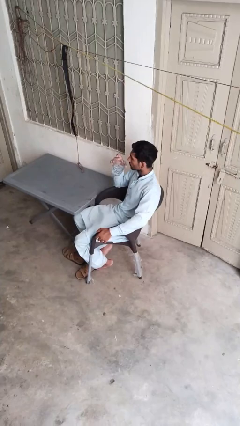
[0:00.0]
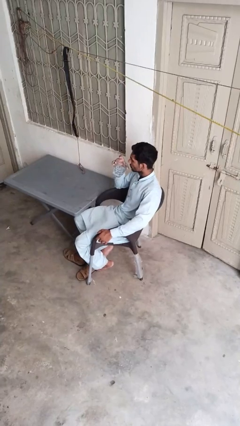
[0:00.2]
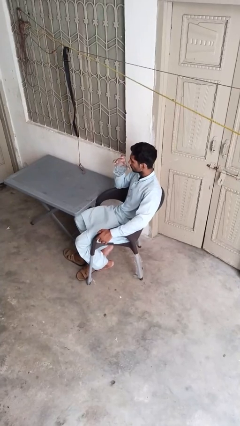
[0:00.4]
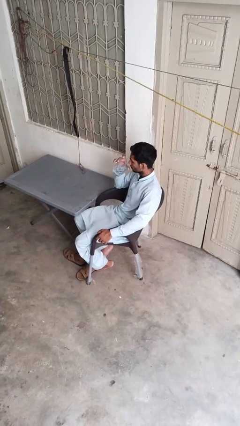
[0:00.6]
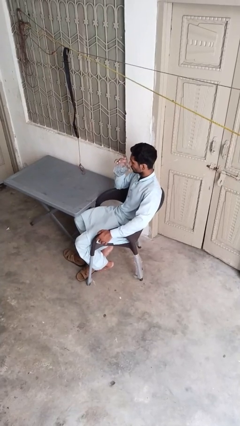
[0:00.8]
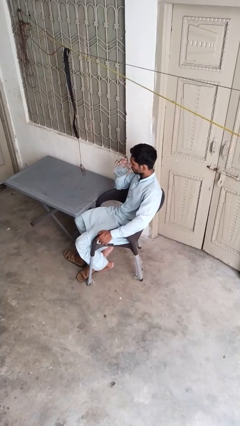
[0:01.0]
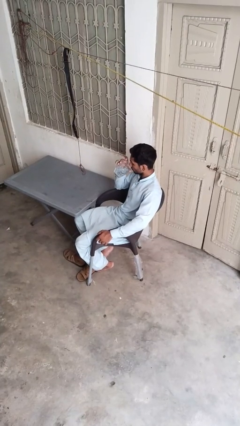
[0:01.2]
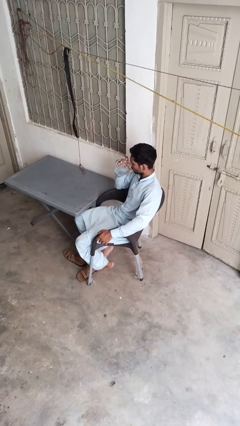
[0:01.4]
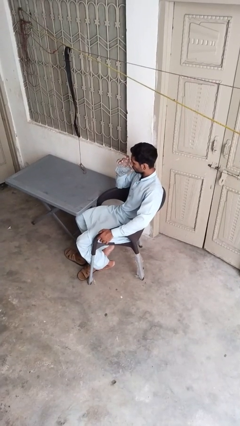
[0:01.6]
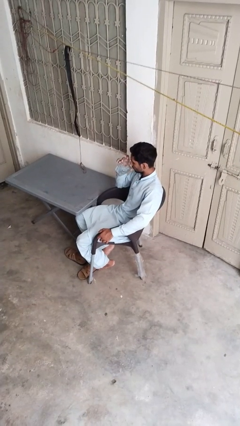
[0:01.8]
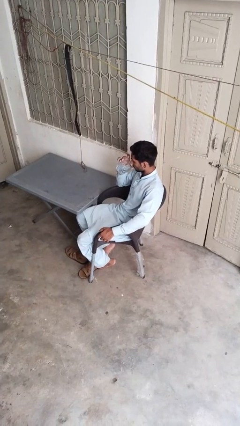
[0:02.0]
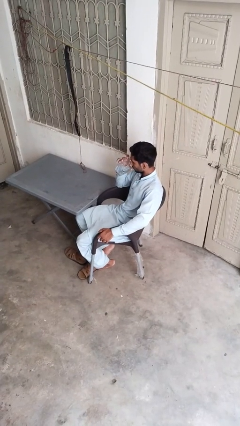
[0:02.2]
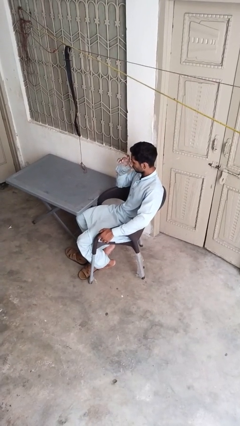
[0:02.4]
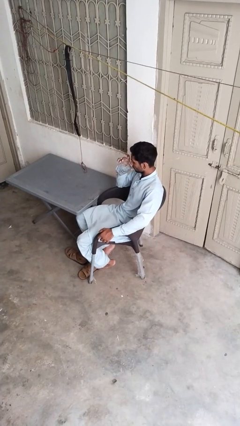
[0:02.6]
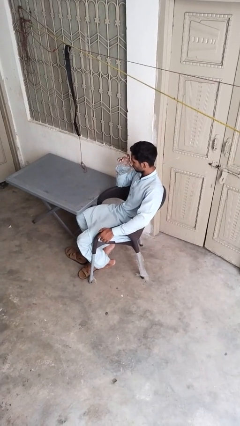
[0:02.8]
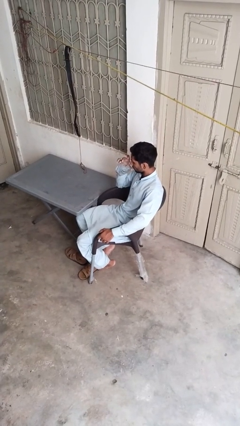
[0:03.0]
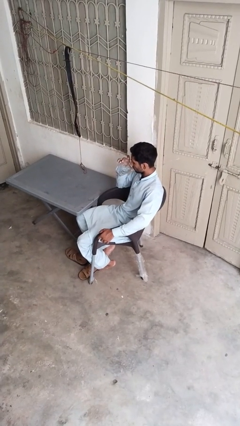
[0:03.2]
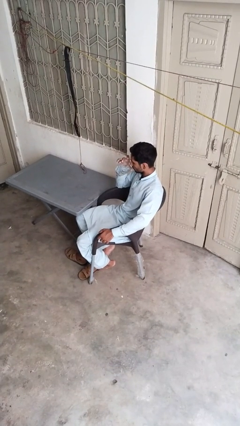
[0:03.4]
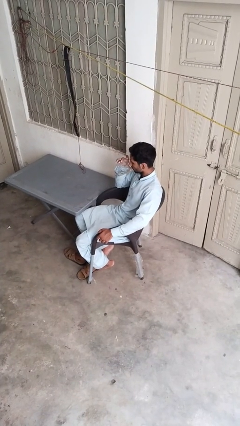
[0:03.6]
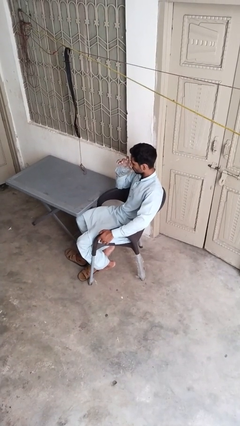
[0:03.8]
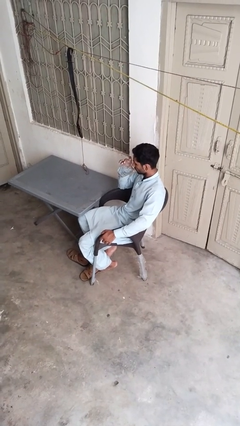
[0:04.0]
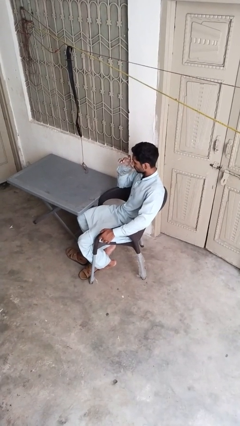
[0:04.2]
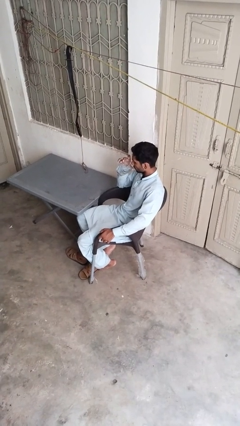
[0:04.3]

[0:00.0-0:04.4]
person drinks from mug

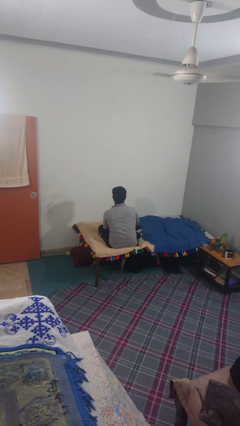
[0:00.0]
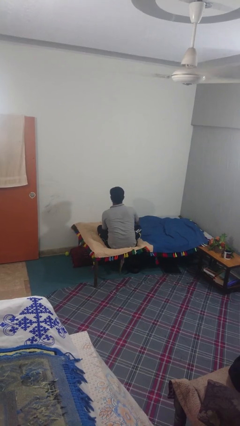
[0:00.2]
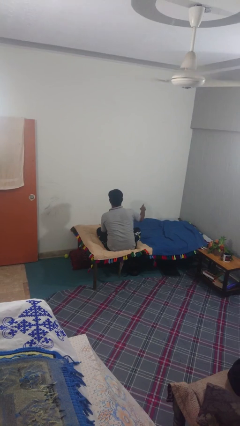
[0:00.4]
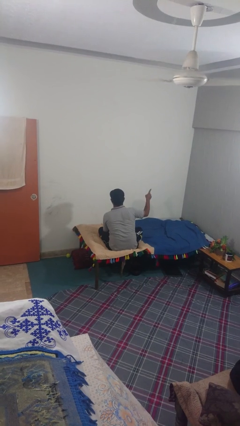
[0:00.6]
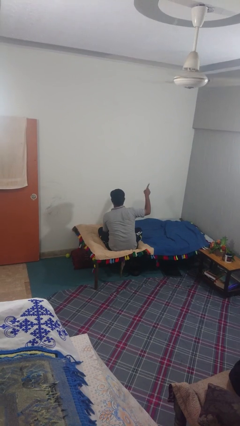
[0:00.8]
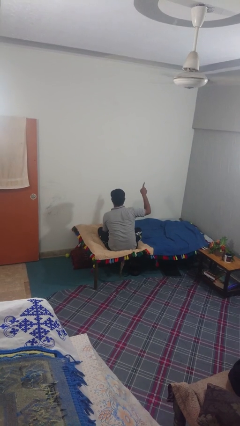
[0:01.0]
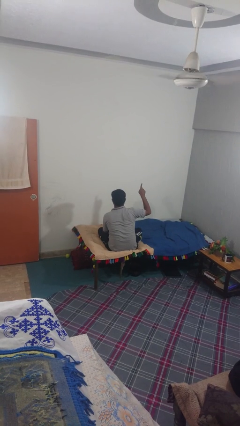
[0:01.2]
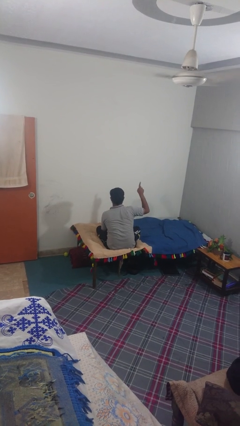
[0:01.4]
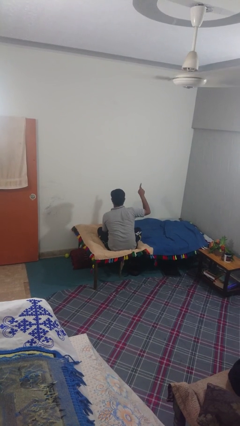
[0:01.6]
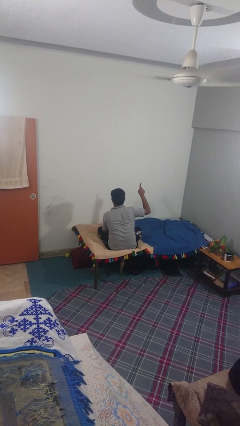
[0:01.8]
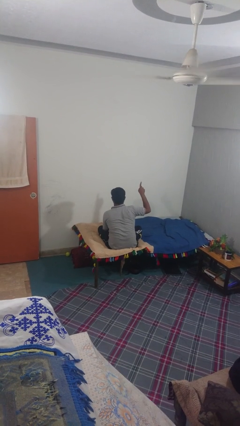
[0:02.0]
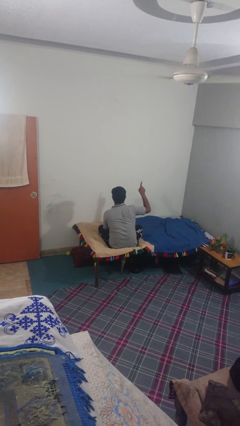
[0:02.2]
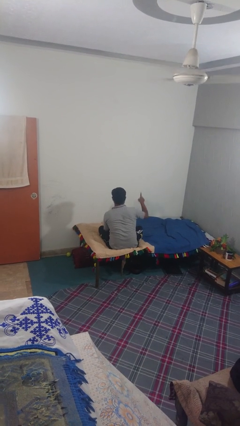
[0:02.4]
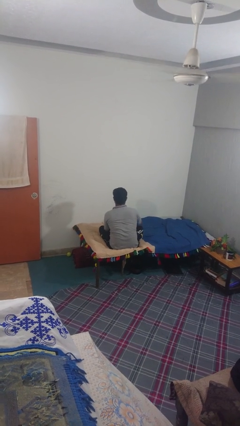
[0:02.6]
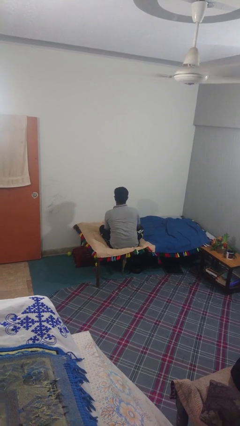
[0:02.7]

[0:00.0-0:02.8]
person gestures number one

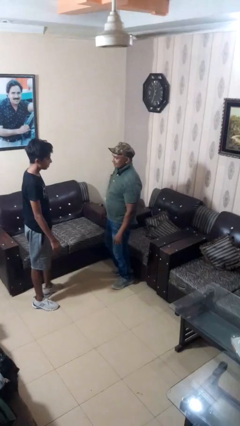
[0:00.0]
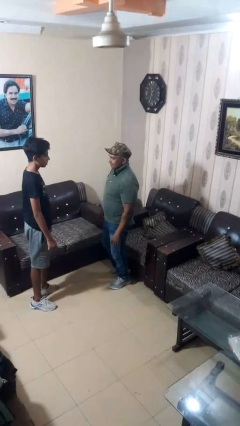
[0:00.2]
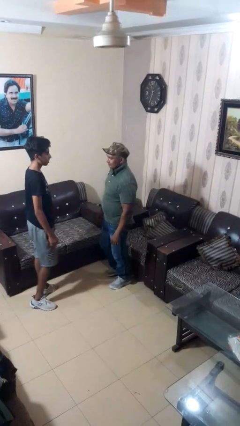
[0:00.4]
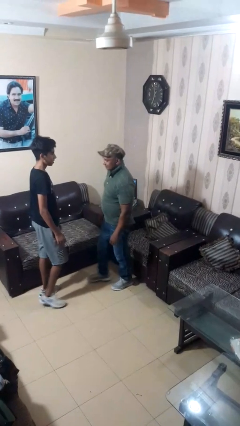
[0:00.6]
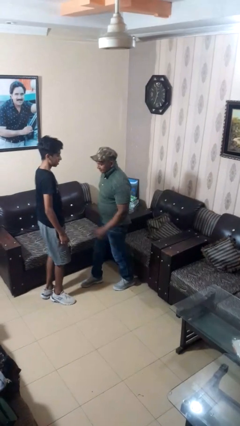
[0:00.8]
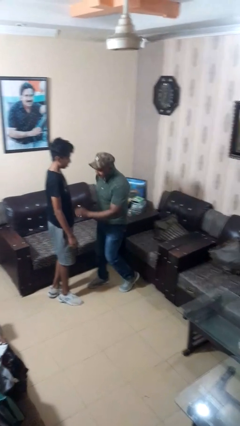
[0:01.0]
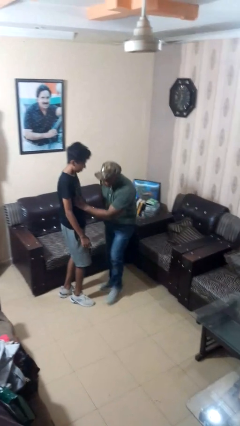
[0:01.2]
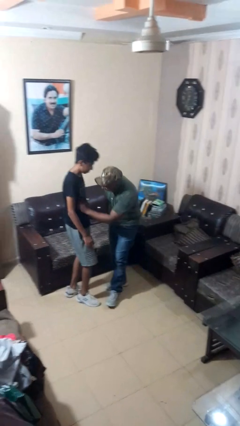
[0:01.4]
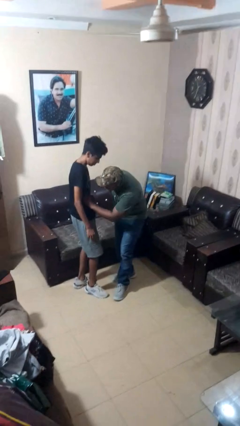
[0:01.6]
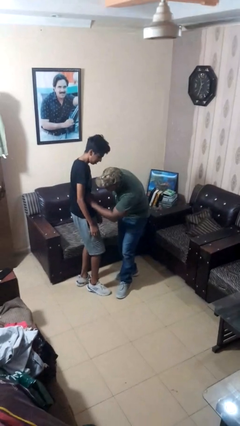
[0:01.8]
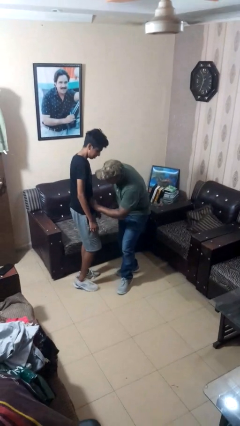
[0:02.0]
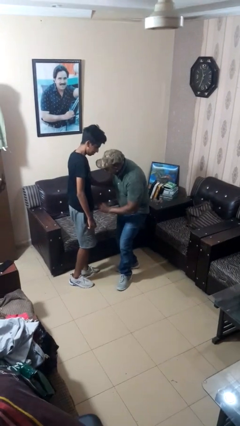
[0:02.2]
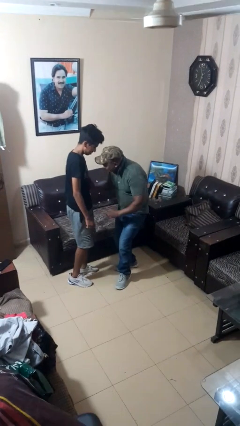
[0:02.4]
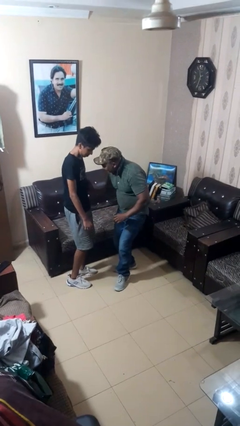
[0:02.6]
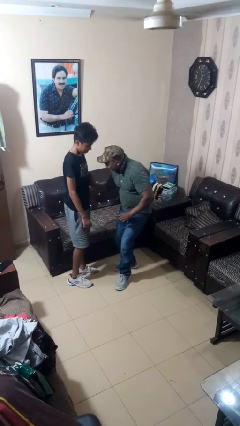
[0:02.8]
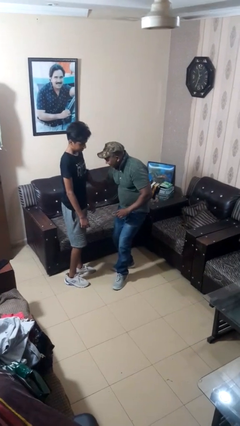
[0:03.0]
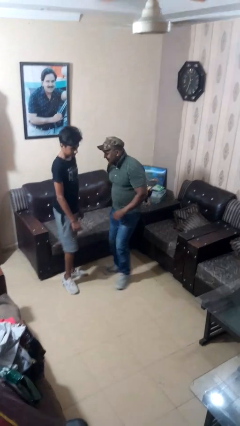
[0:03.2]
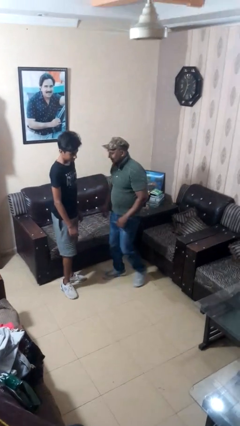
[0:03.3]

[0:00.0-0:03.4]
person tickles person

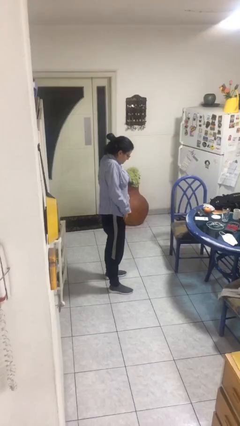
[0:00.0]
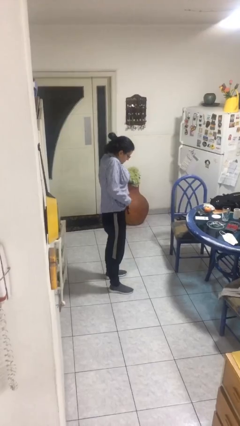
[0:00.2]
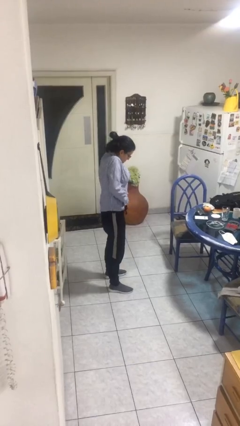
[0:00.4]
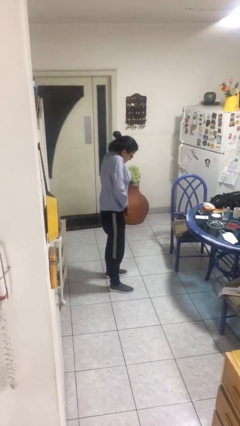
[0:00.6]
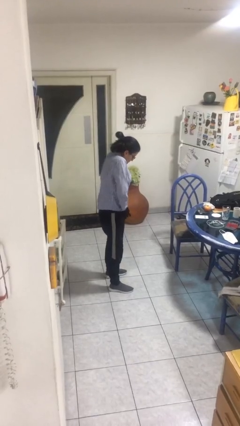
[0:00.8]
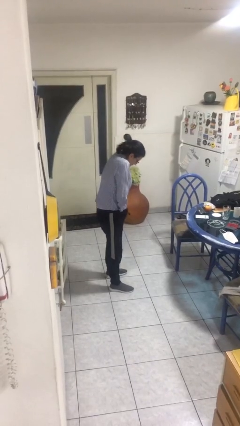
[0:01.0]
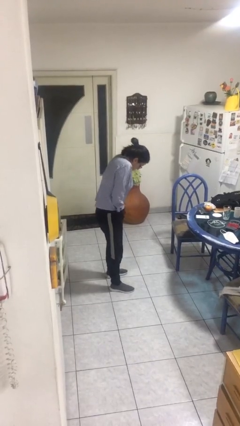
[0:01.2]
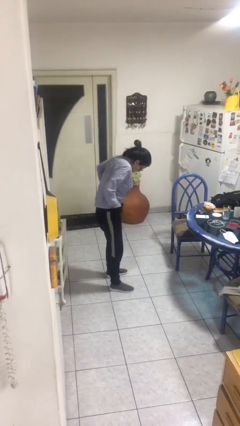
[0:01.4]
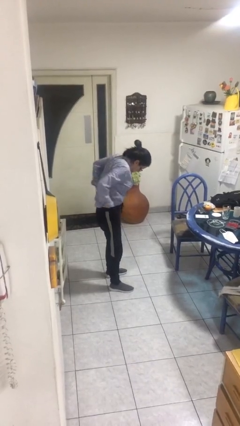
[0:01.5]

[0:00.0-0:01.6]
person tucks in shirt

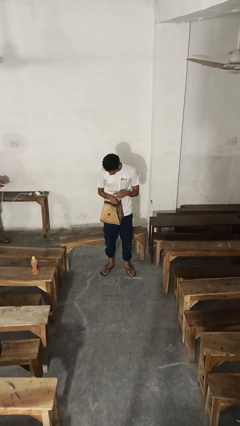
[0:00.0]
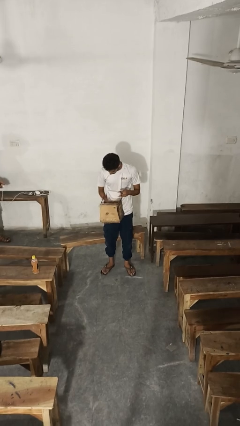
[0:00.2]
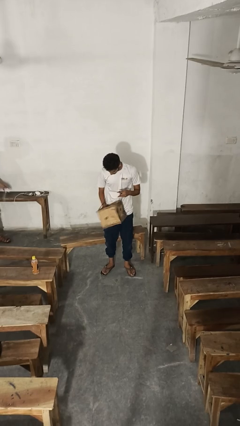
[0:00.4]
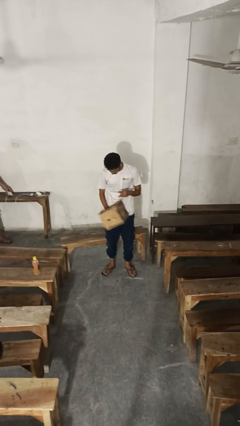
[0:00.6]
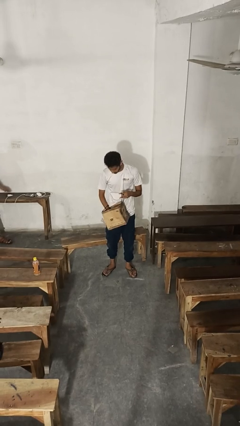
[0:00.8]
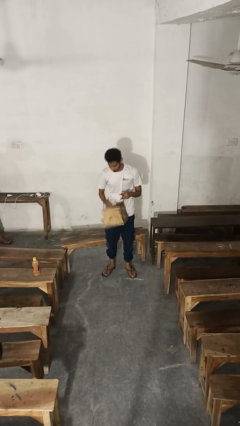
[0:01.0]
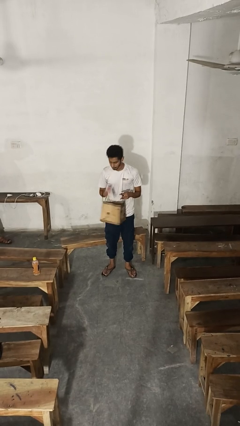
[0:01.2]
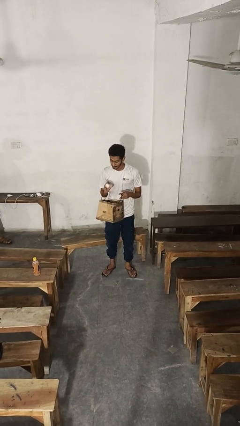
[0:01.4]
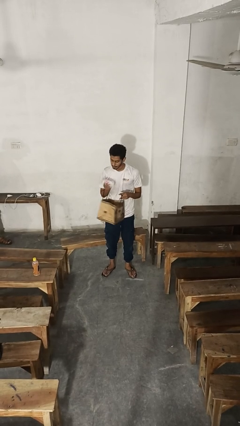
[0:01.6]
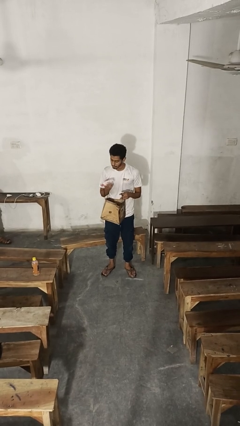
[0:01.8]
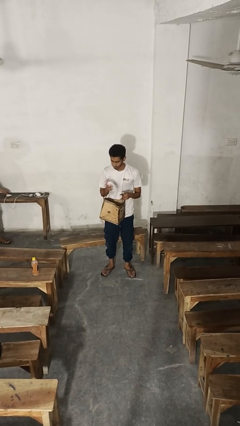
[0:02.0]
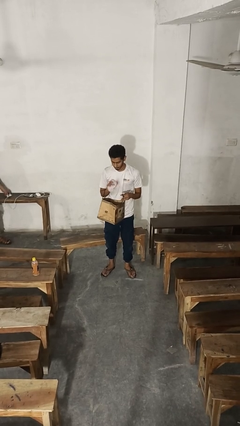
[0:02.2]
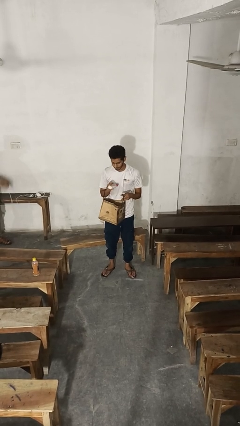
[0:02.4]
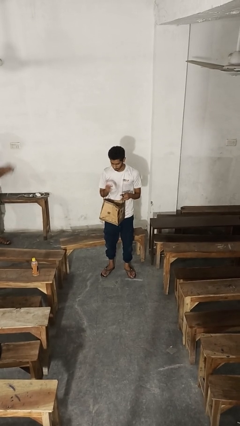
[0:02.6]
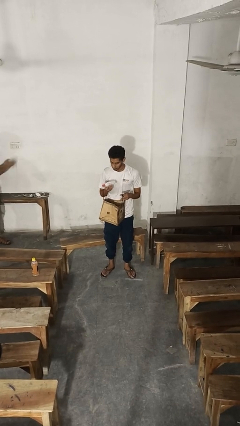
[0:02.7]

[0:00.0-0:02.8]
person takes object from purse

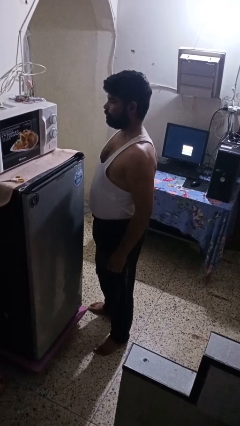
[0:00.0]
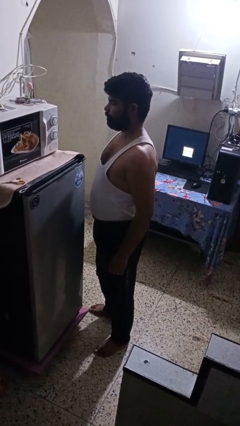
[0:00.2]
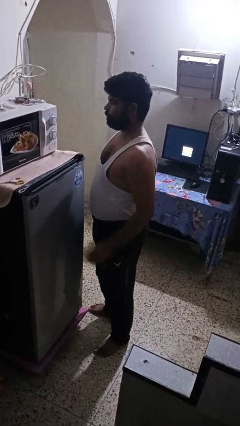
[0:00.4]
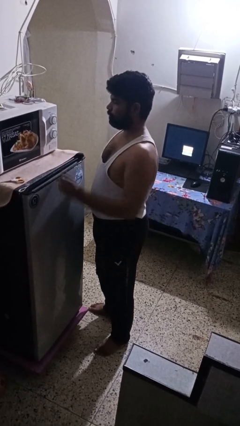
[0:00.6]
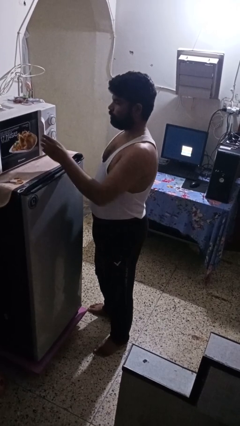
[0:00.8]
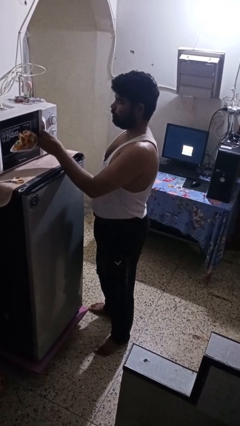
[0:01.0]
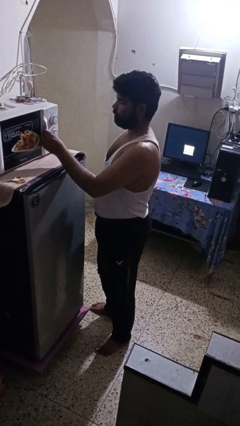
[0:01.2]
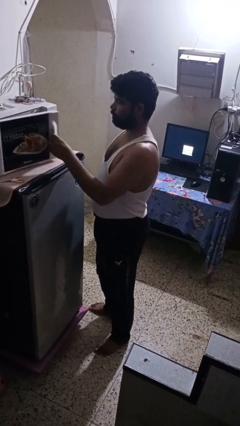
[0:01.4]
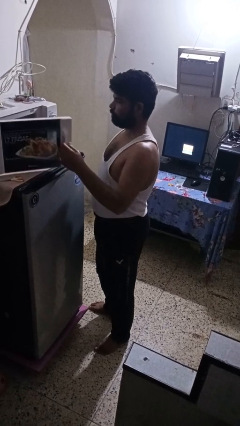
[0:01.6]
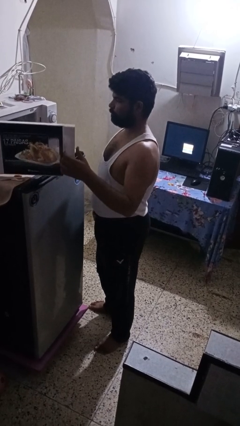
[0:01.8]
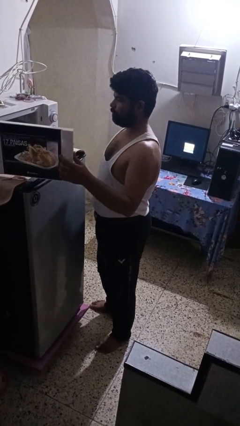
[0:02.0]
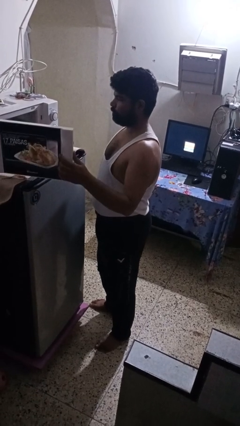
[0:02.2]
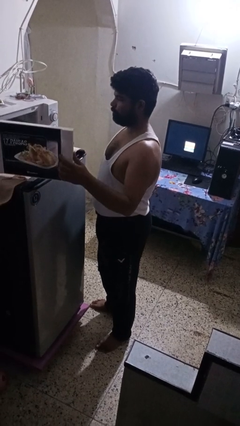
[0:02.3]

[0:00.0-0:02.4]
person opens microwave
